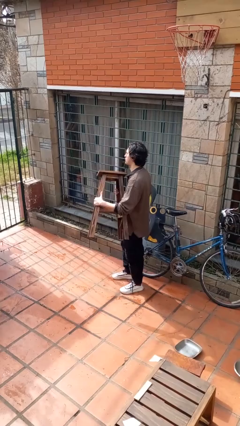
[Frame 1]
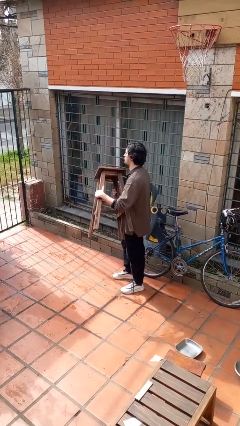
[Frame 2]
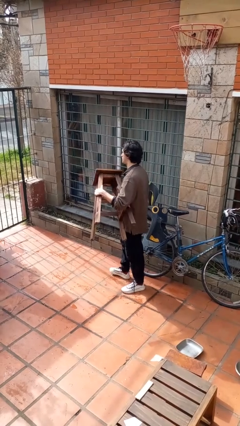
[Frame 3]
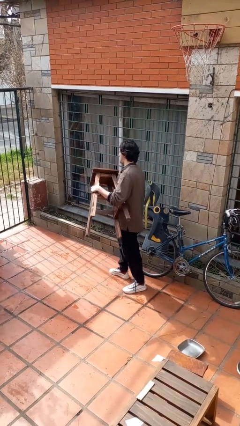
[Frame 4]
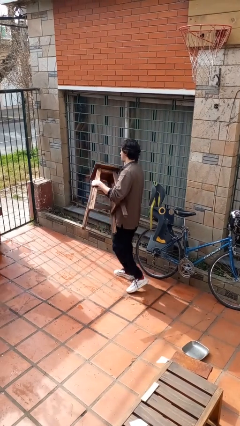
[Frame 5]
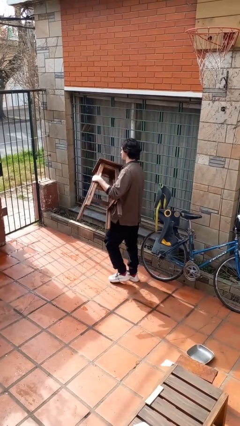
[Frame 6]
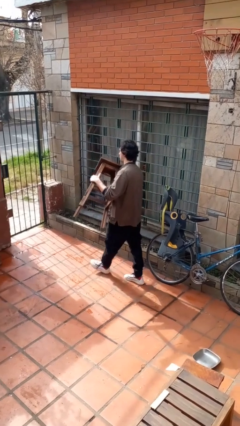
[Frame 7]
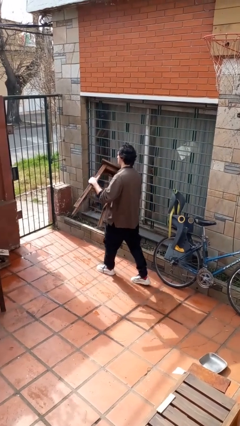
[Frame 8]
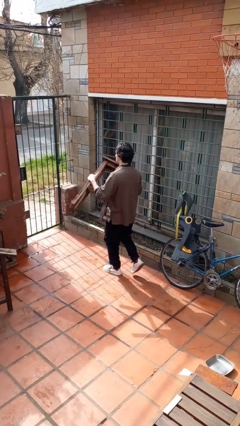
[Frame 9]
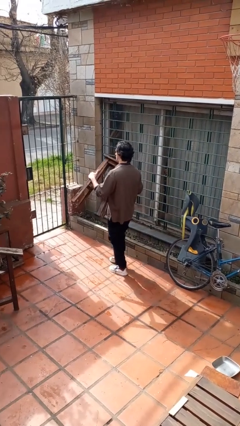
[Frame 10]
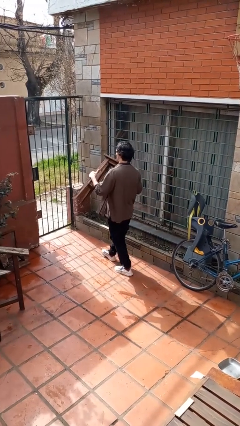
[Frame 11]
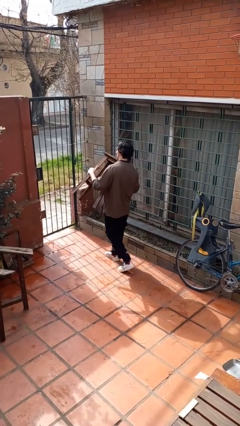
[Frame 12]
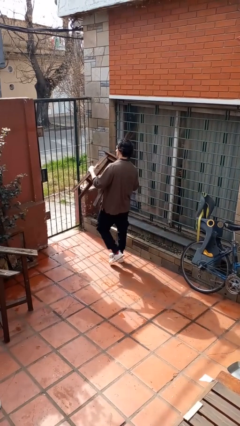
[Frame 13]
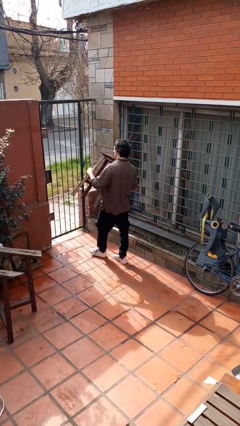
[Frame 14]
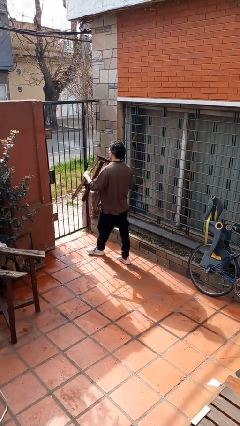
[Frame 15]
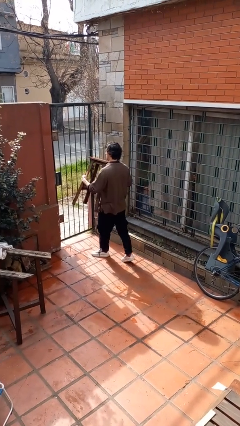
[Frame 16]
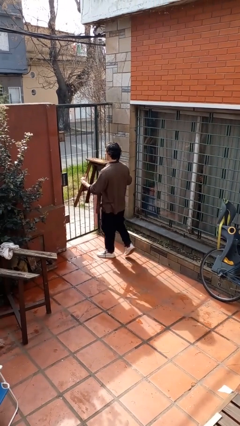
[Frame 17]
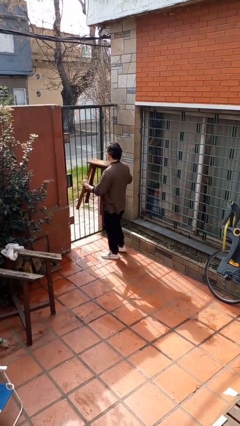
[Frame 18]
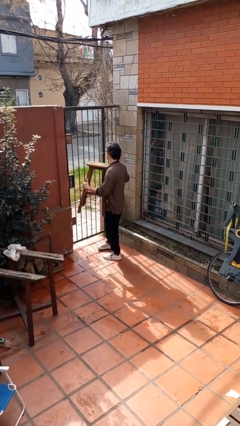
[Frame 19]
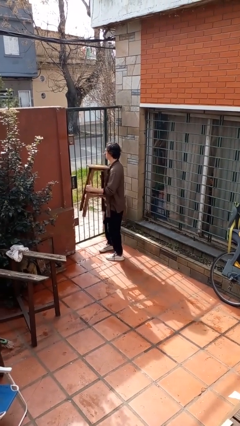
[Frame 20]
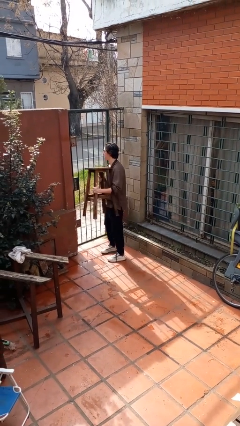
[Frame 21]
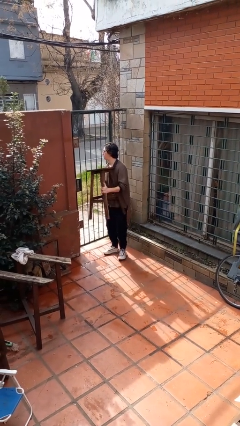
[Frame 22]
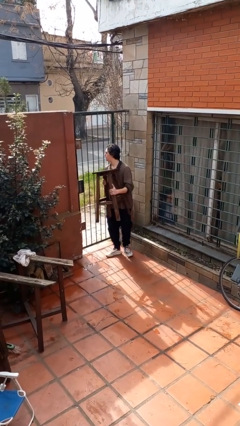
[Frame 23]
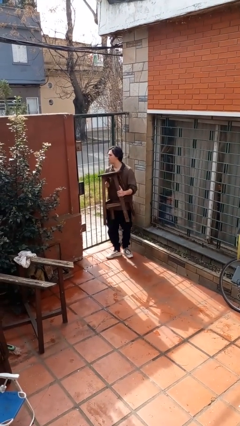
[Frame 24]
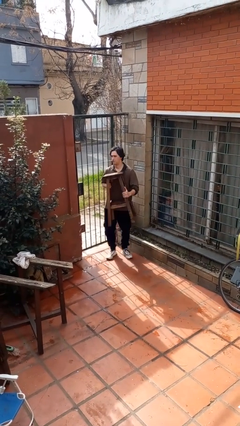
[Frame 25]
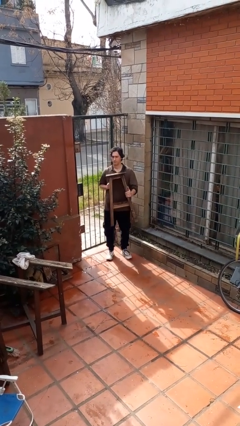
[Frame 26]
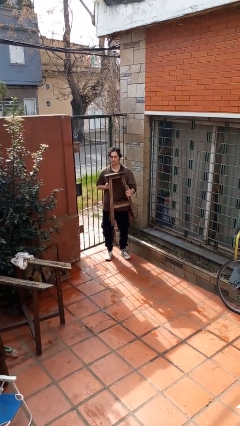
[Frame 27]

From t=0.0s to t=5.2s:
person carries furniture

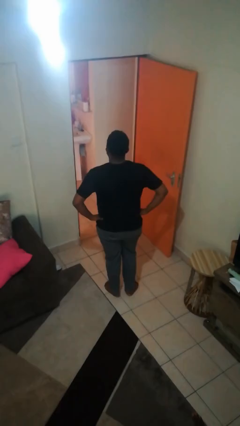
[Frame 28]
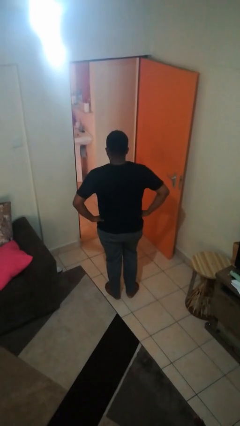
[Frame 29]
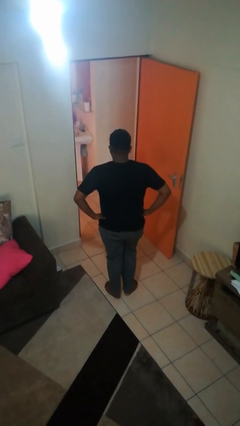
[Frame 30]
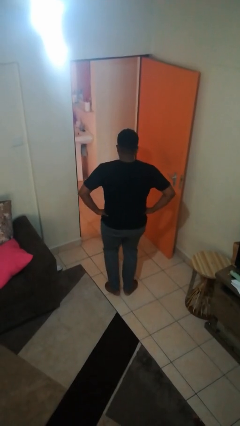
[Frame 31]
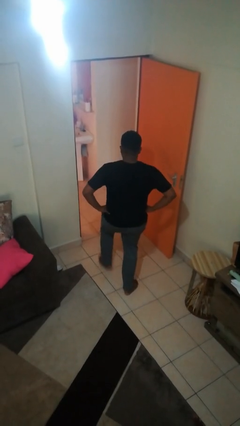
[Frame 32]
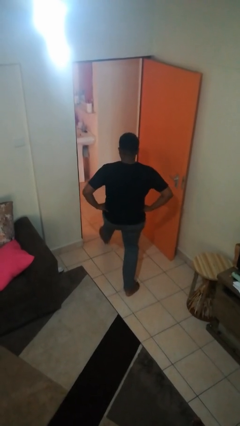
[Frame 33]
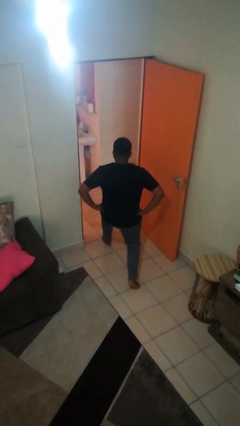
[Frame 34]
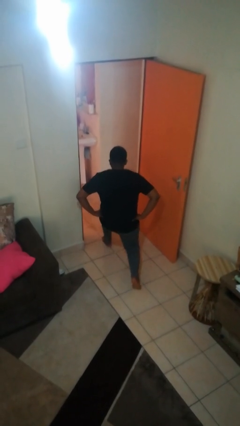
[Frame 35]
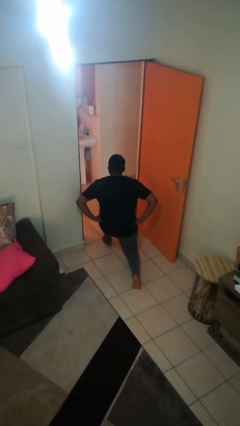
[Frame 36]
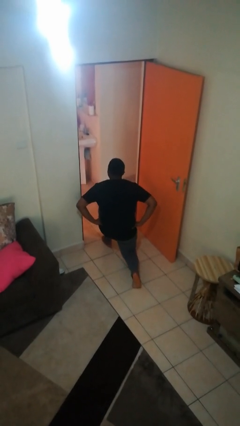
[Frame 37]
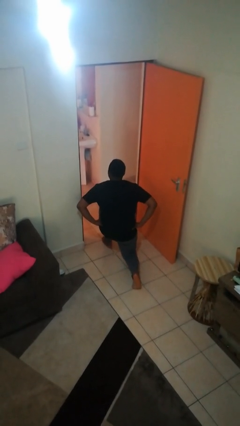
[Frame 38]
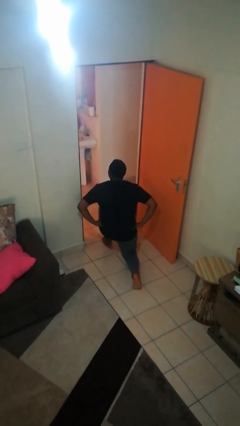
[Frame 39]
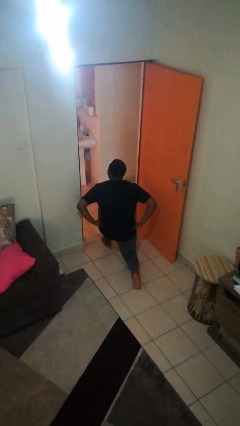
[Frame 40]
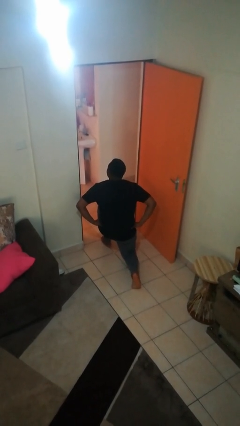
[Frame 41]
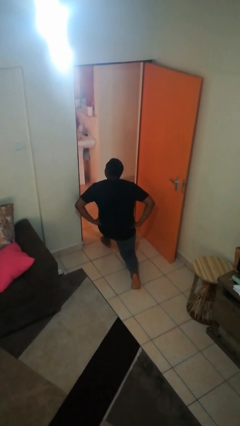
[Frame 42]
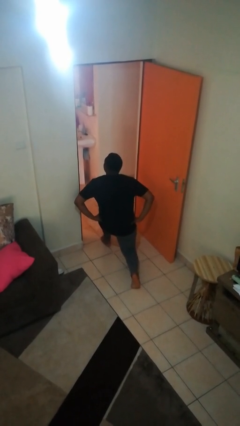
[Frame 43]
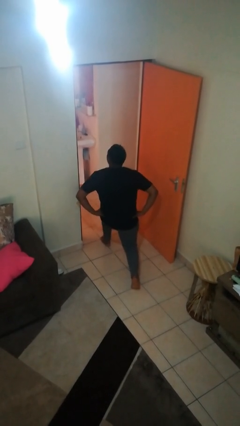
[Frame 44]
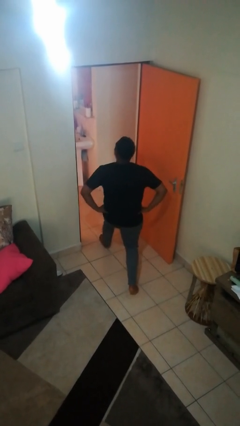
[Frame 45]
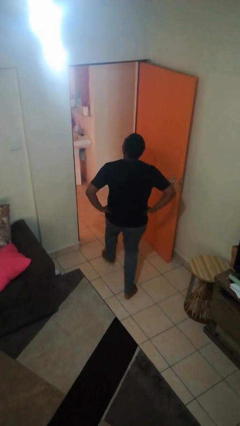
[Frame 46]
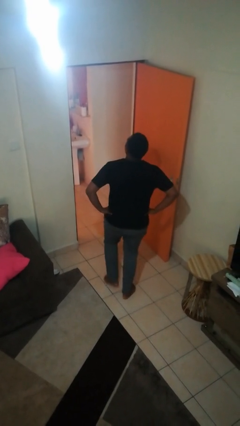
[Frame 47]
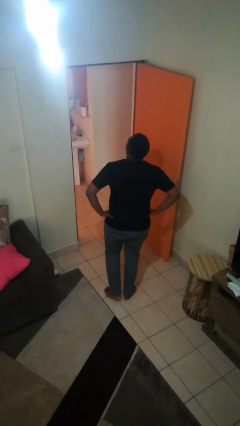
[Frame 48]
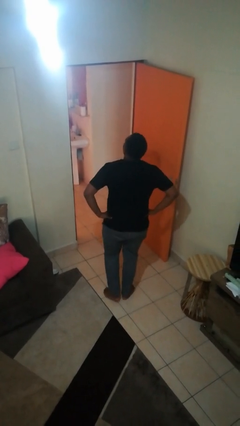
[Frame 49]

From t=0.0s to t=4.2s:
person exercises with lunges

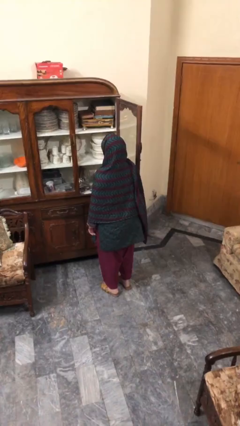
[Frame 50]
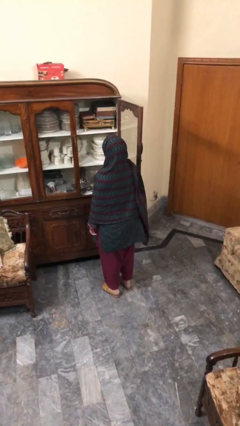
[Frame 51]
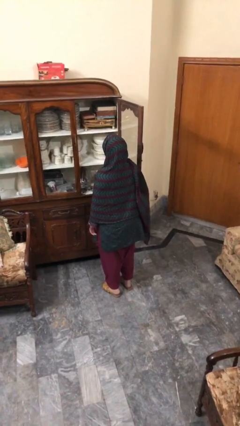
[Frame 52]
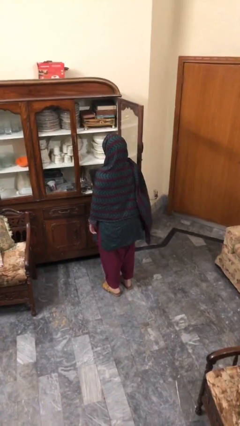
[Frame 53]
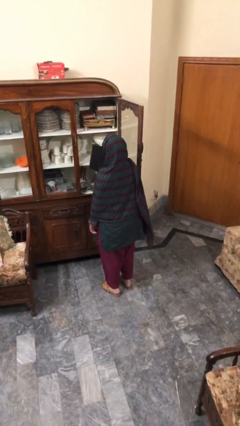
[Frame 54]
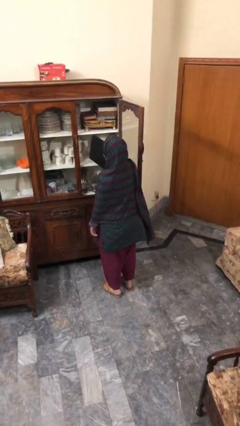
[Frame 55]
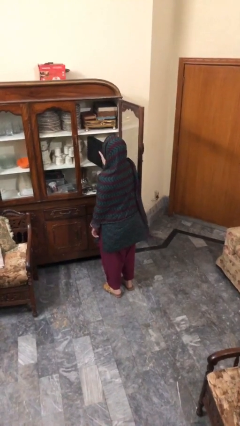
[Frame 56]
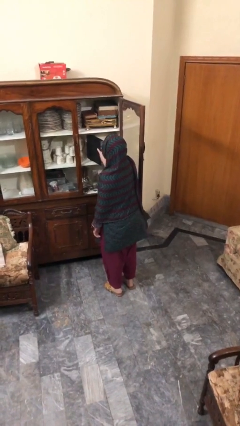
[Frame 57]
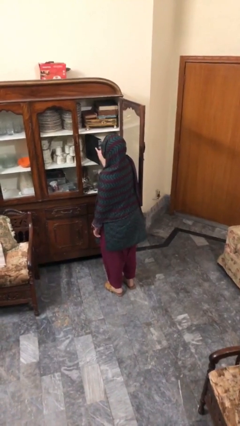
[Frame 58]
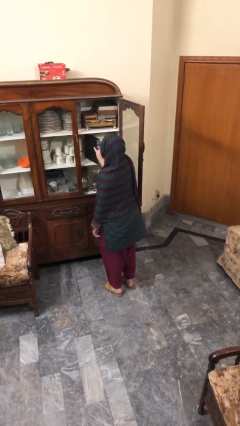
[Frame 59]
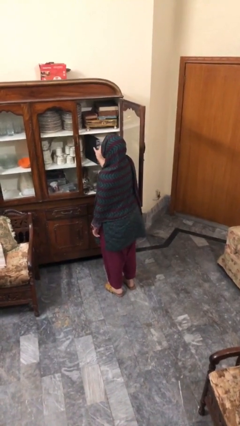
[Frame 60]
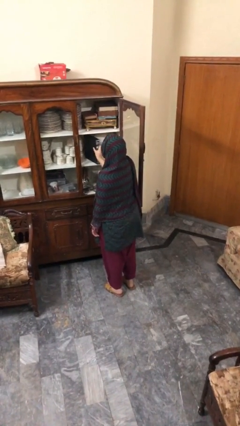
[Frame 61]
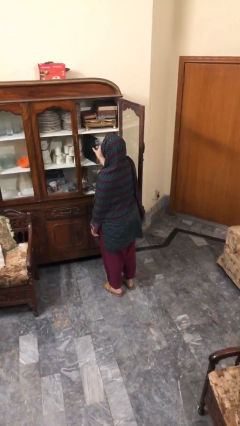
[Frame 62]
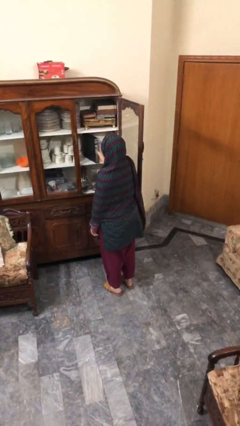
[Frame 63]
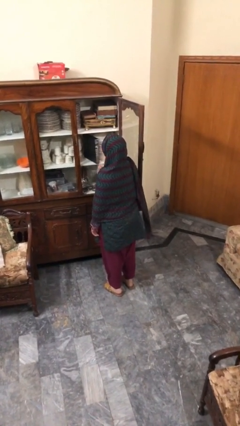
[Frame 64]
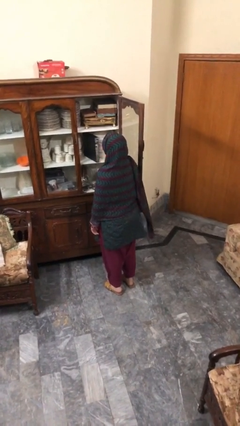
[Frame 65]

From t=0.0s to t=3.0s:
person puts down object into cabinet

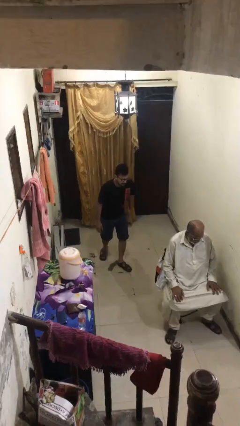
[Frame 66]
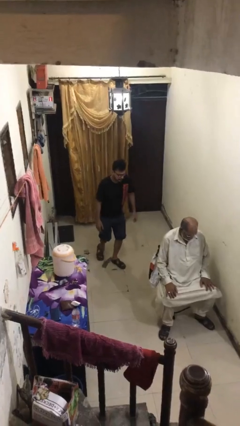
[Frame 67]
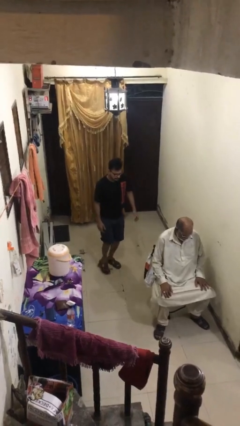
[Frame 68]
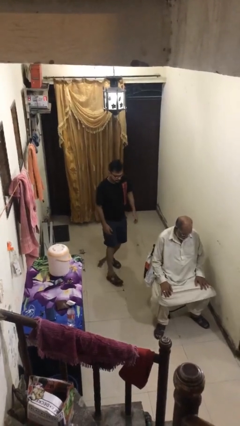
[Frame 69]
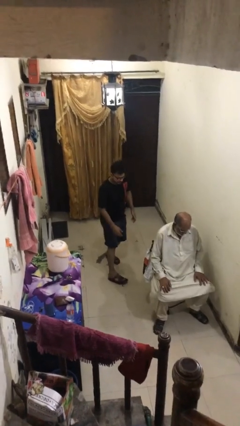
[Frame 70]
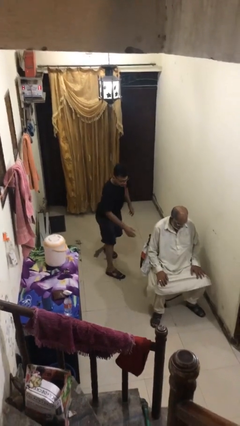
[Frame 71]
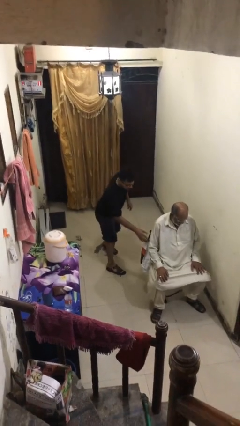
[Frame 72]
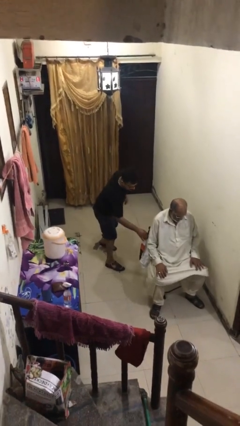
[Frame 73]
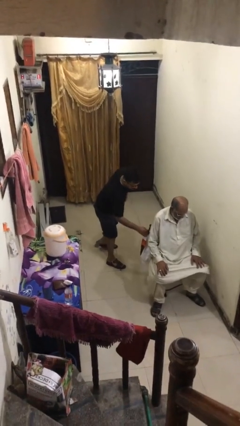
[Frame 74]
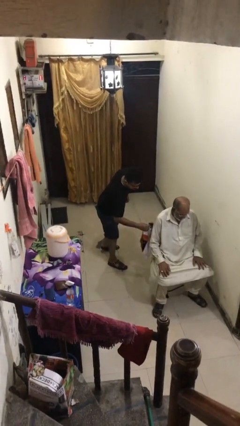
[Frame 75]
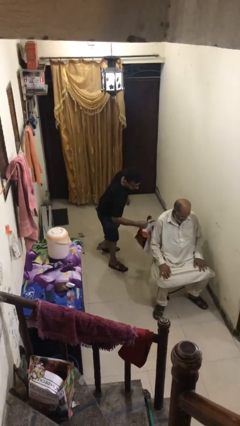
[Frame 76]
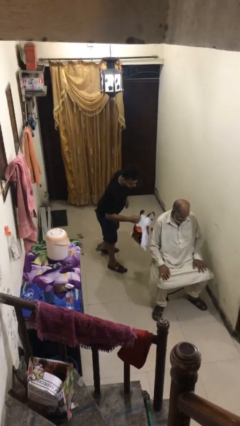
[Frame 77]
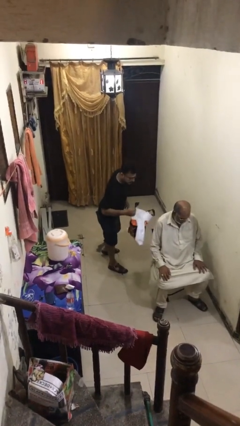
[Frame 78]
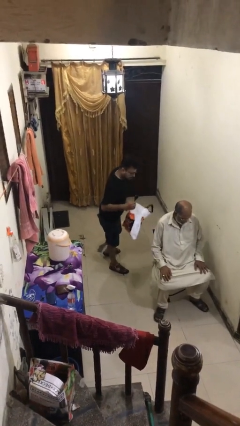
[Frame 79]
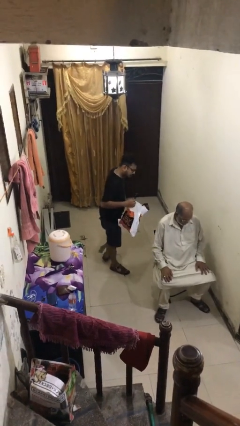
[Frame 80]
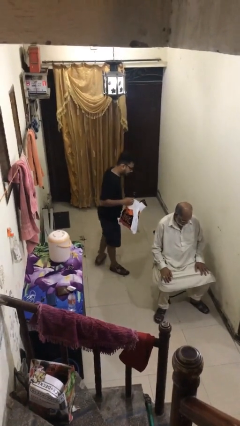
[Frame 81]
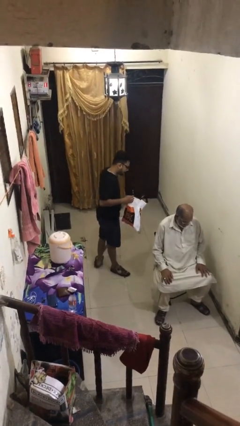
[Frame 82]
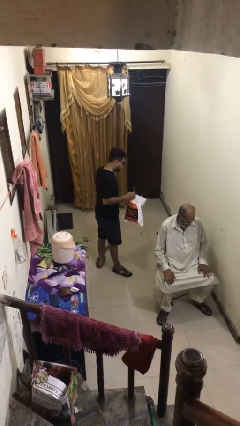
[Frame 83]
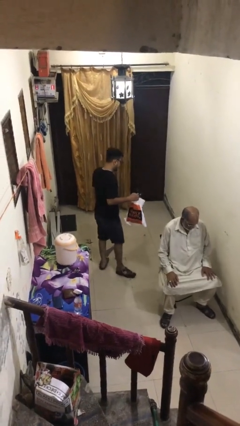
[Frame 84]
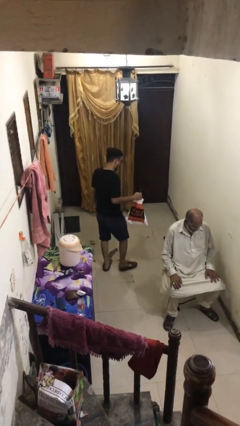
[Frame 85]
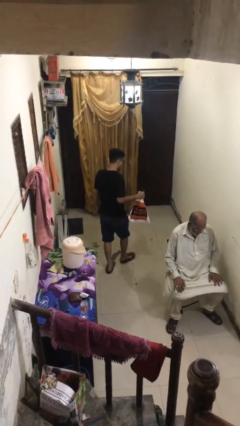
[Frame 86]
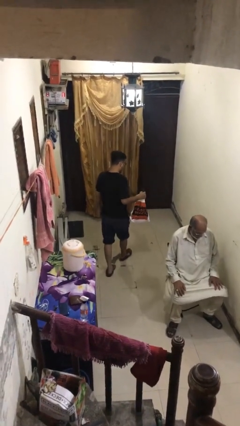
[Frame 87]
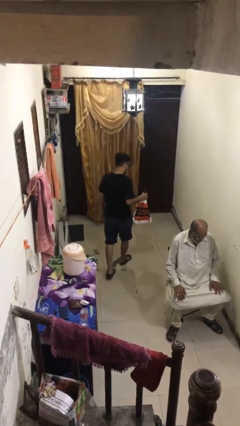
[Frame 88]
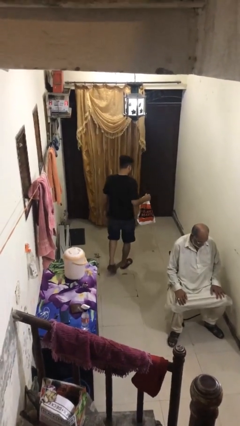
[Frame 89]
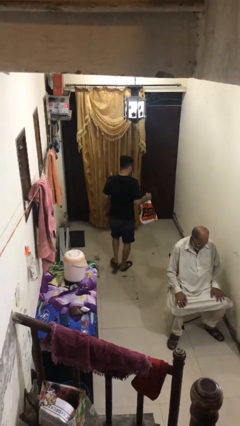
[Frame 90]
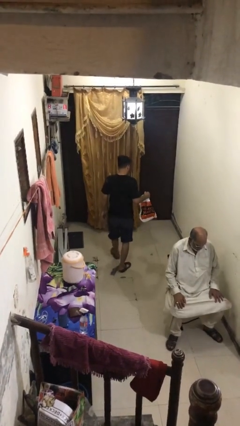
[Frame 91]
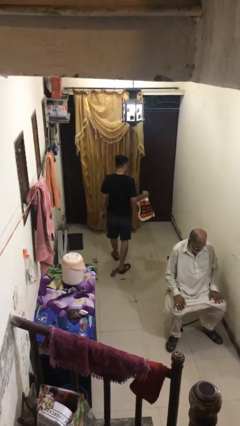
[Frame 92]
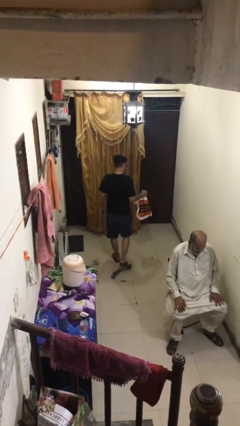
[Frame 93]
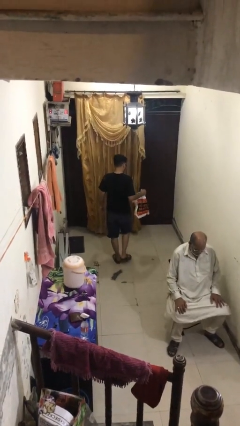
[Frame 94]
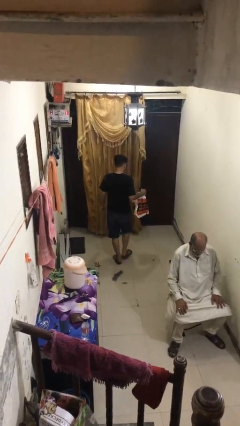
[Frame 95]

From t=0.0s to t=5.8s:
person steals object from person

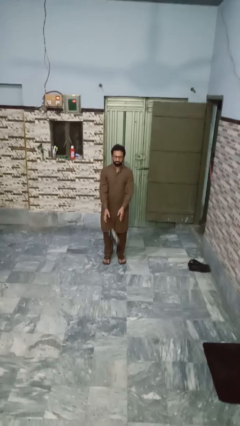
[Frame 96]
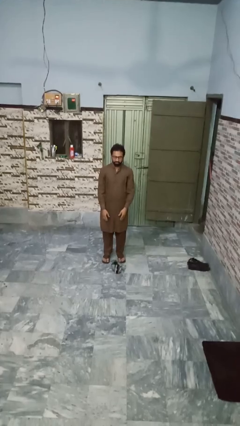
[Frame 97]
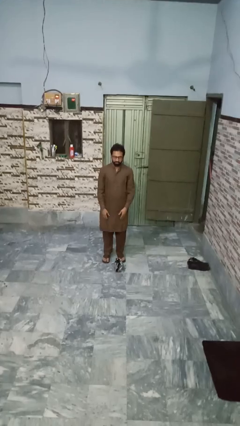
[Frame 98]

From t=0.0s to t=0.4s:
person catches dropped object
